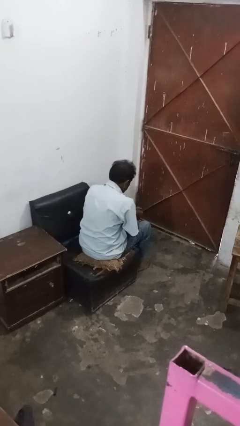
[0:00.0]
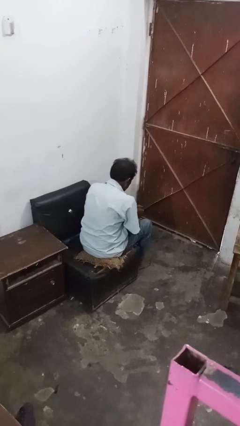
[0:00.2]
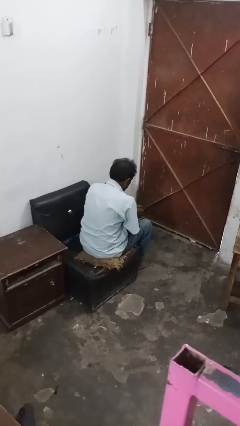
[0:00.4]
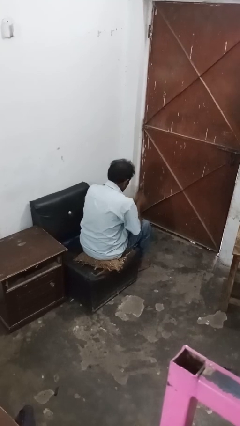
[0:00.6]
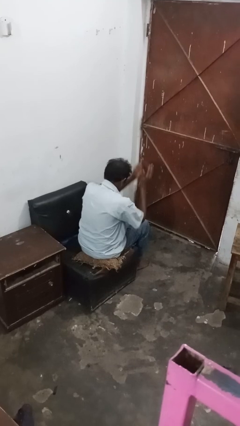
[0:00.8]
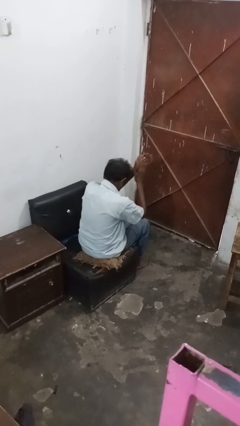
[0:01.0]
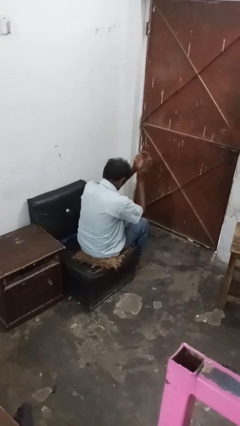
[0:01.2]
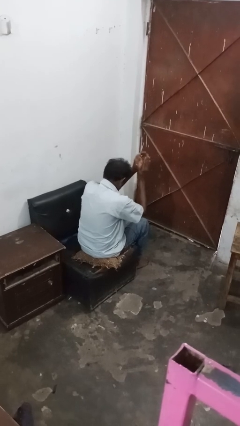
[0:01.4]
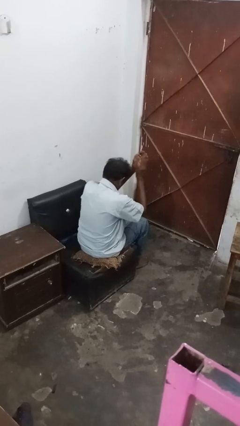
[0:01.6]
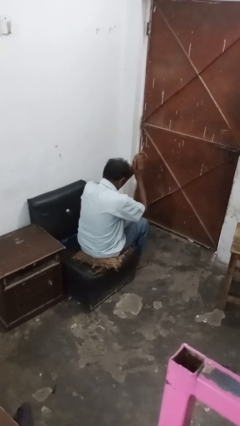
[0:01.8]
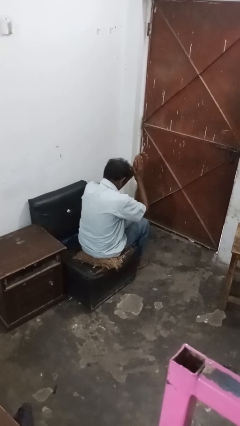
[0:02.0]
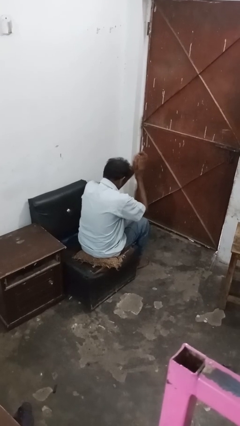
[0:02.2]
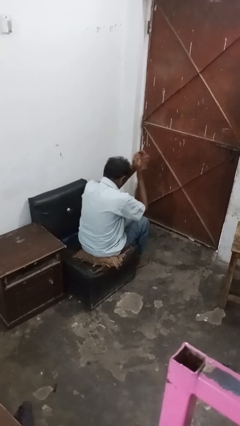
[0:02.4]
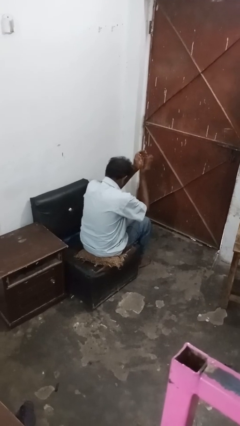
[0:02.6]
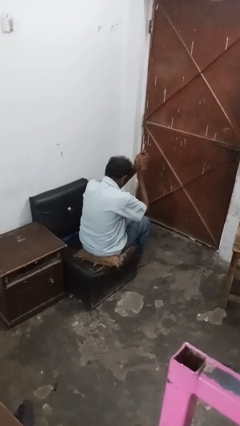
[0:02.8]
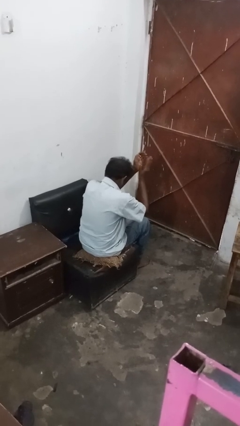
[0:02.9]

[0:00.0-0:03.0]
person claps hands

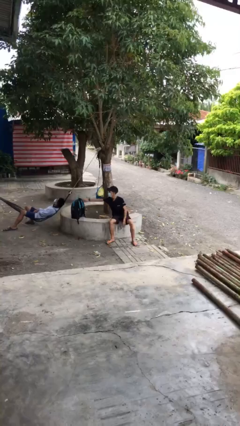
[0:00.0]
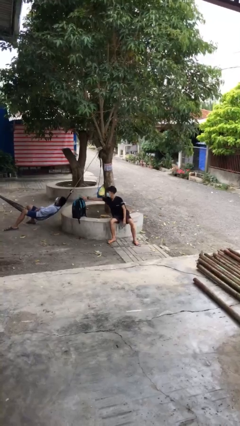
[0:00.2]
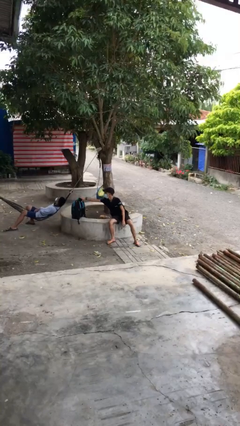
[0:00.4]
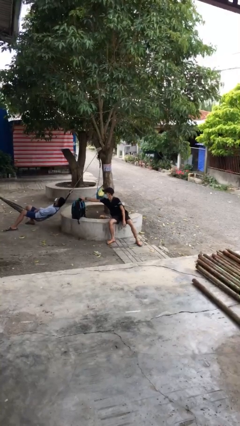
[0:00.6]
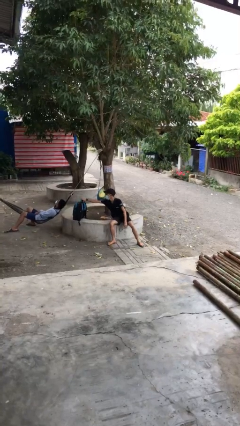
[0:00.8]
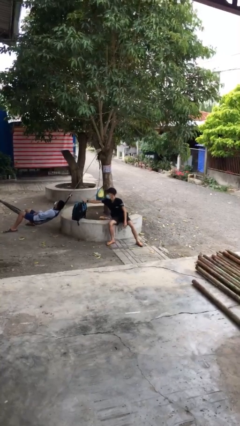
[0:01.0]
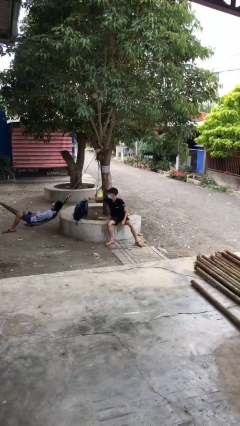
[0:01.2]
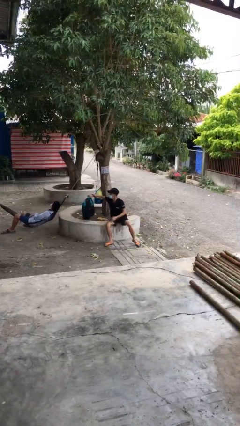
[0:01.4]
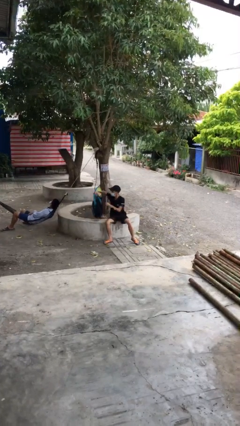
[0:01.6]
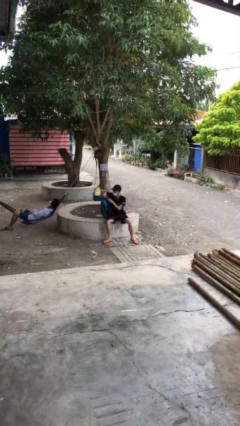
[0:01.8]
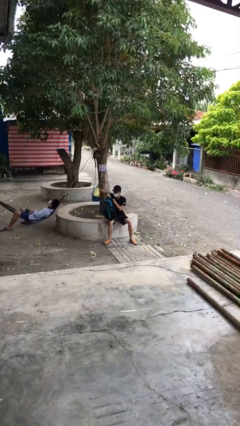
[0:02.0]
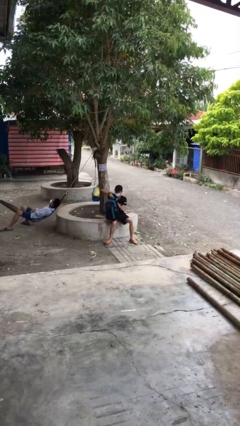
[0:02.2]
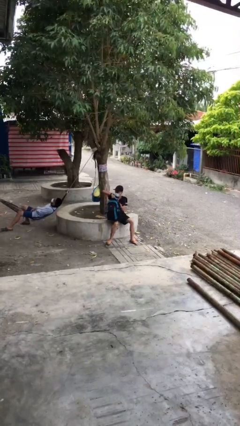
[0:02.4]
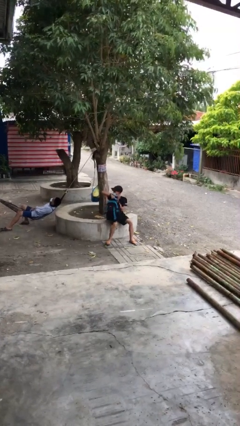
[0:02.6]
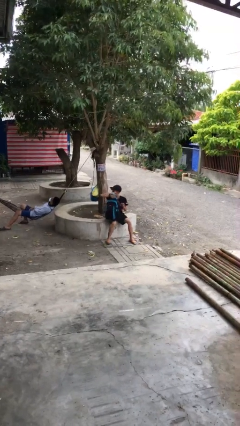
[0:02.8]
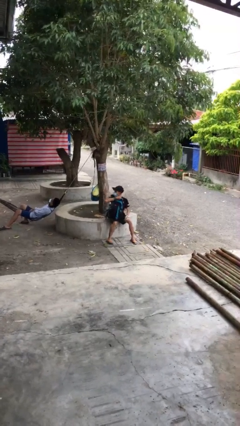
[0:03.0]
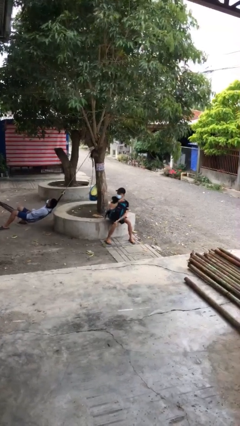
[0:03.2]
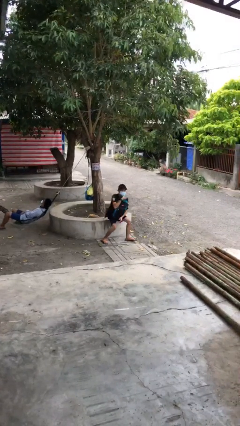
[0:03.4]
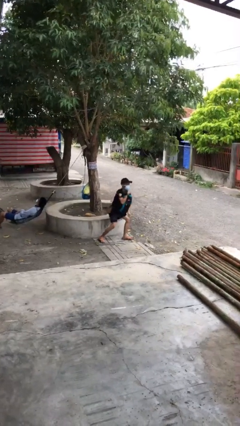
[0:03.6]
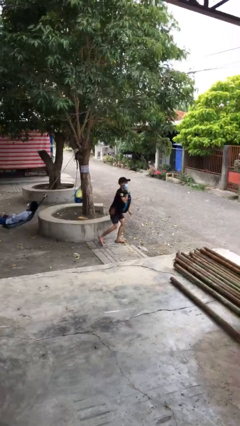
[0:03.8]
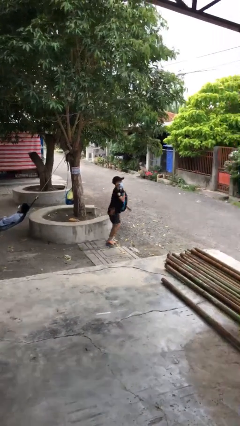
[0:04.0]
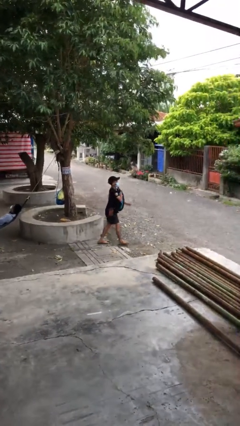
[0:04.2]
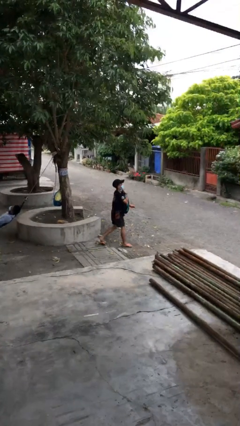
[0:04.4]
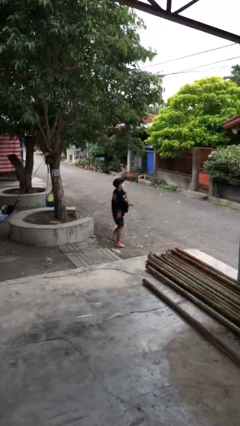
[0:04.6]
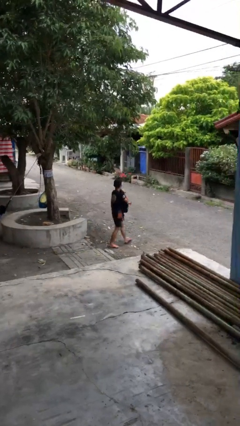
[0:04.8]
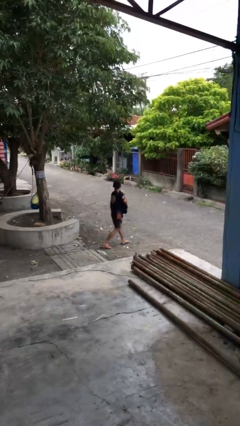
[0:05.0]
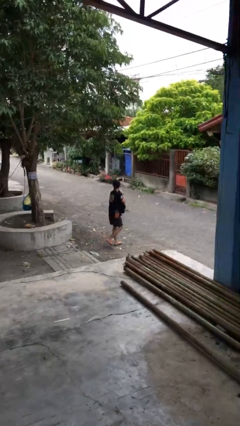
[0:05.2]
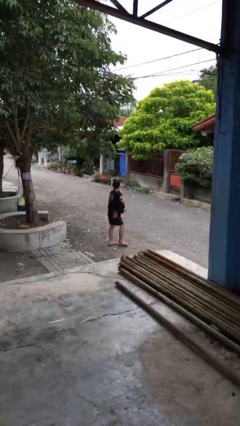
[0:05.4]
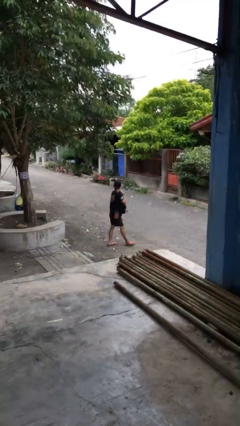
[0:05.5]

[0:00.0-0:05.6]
person steals object from person

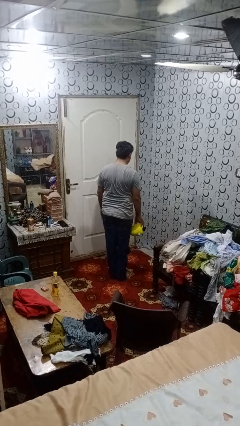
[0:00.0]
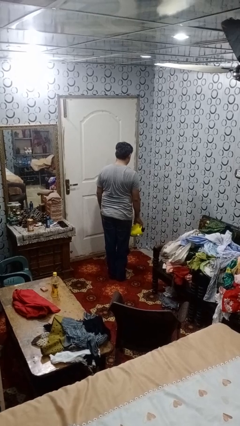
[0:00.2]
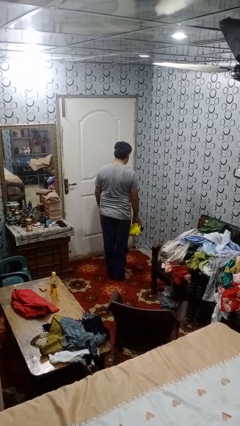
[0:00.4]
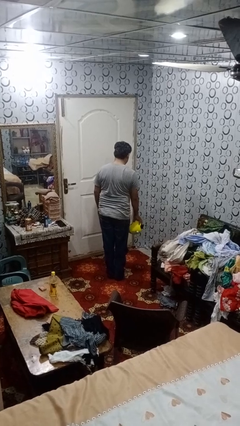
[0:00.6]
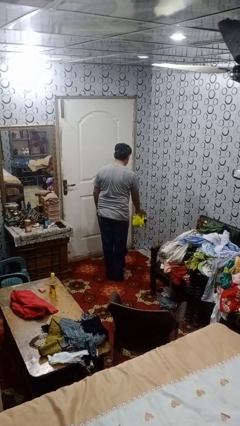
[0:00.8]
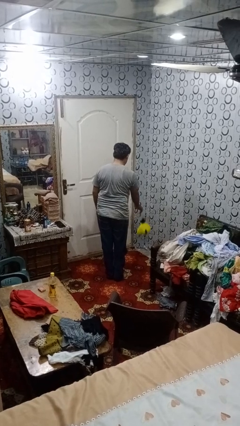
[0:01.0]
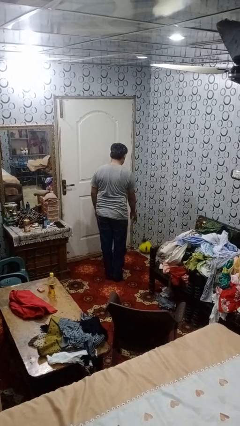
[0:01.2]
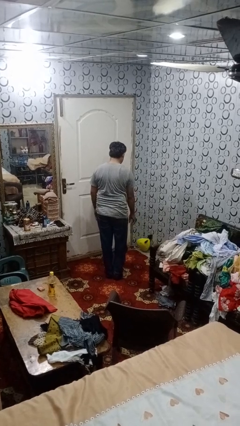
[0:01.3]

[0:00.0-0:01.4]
person throws object to ground

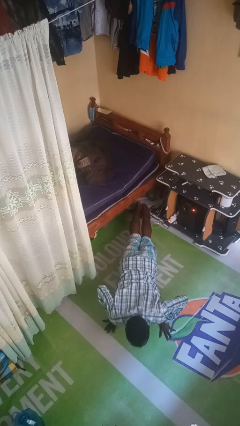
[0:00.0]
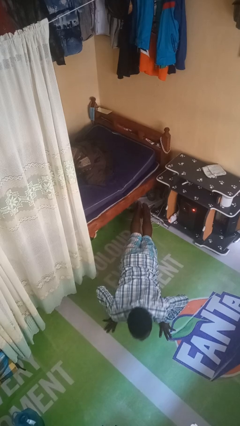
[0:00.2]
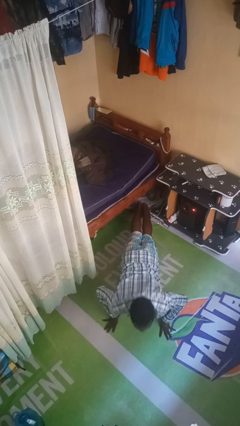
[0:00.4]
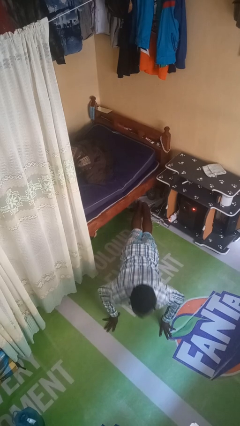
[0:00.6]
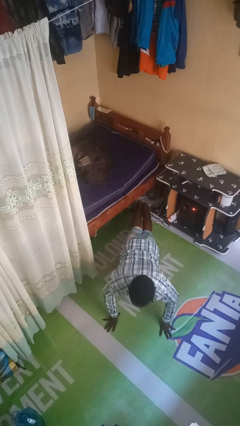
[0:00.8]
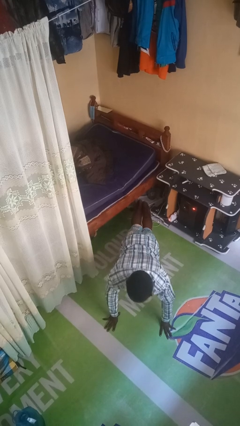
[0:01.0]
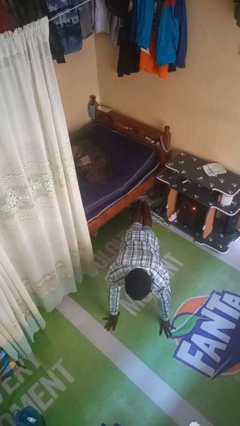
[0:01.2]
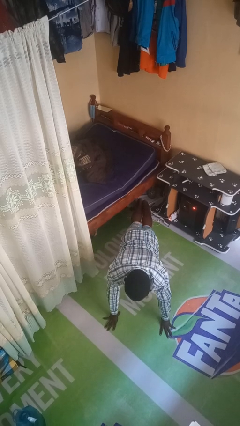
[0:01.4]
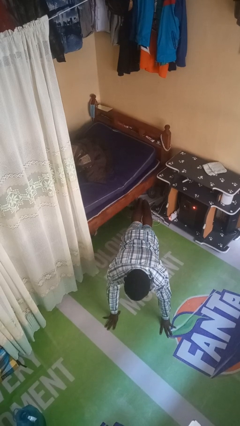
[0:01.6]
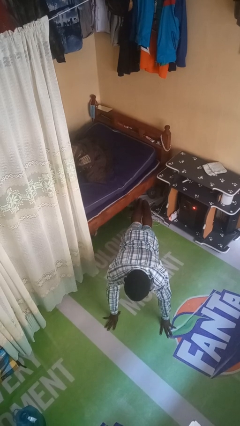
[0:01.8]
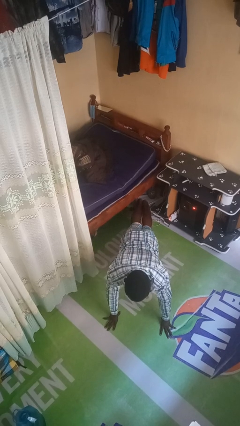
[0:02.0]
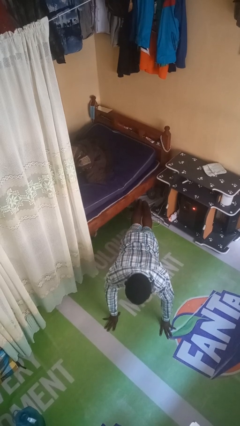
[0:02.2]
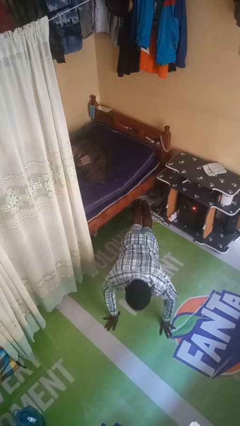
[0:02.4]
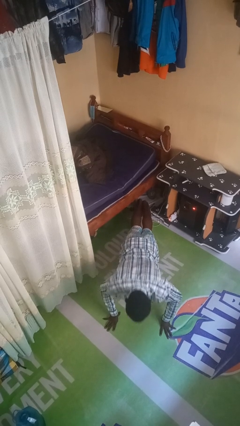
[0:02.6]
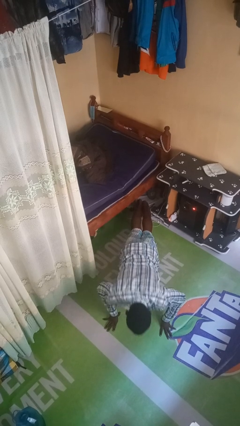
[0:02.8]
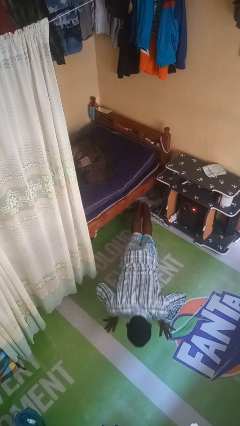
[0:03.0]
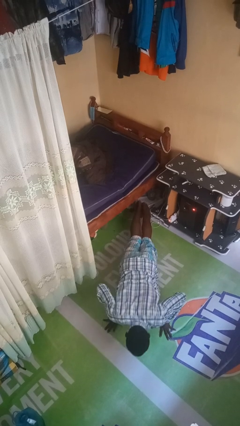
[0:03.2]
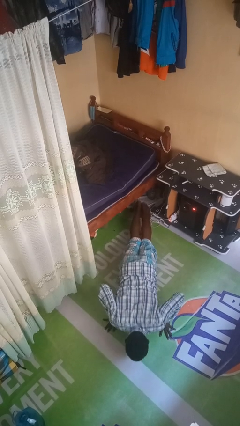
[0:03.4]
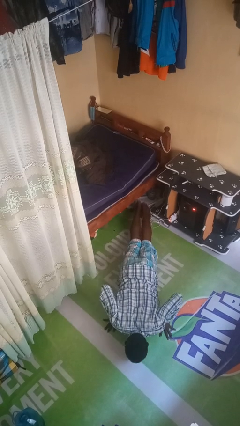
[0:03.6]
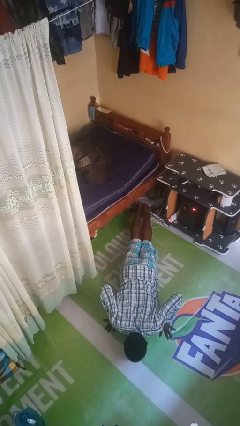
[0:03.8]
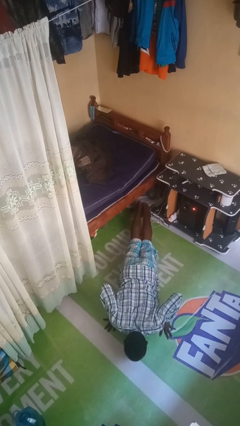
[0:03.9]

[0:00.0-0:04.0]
person exercises with pushup

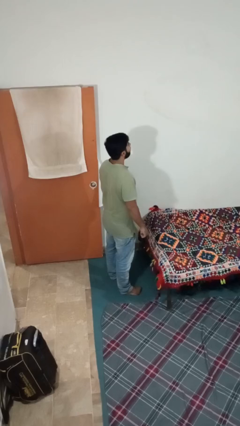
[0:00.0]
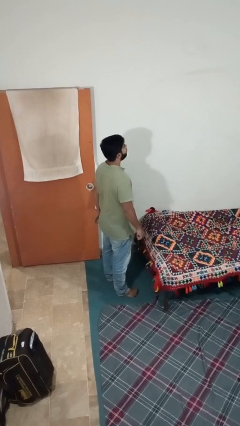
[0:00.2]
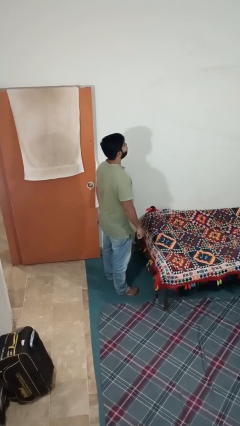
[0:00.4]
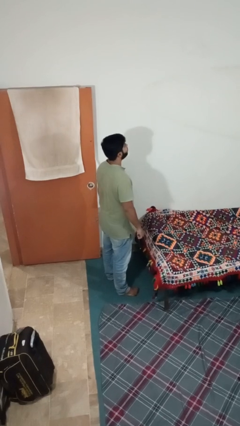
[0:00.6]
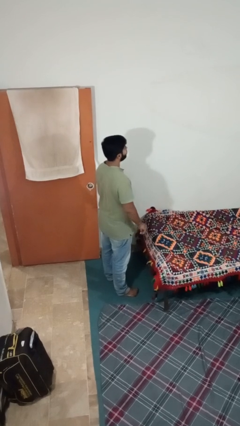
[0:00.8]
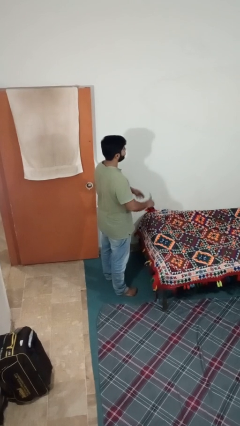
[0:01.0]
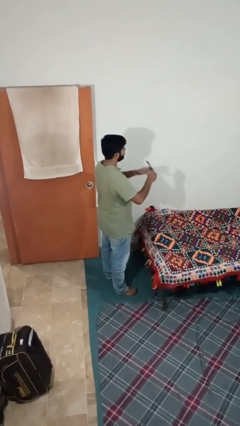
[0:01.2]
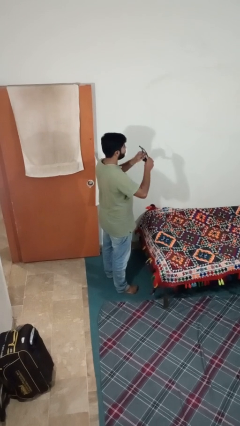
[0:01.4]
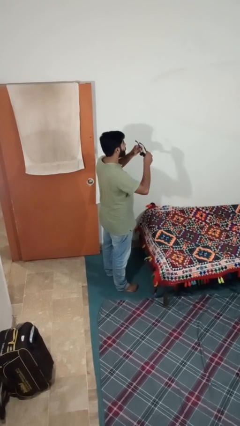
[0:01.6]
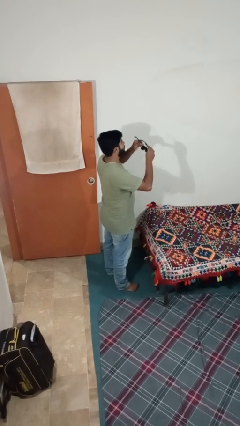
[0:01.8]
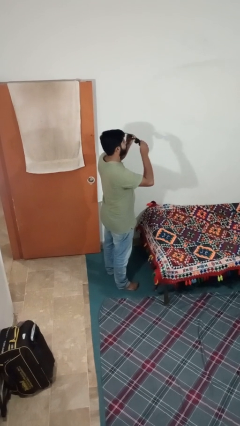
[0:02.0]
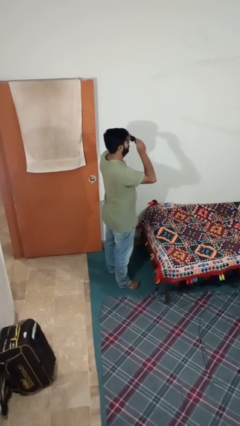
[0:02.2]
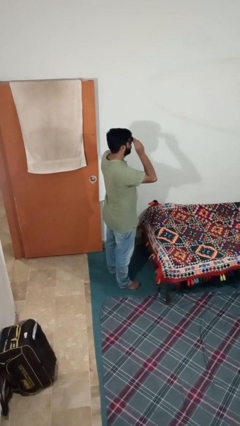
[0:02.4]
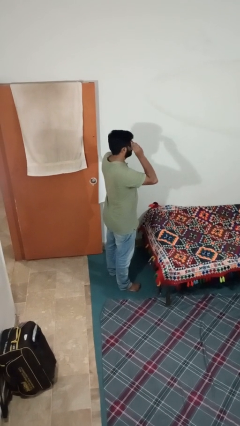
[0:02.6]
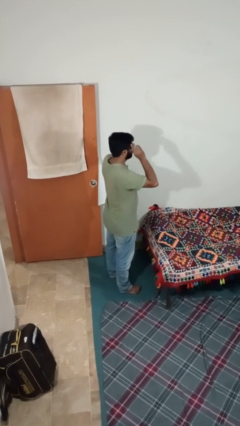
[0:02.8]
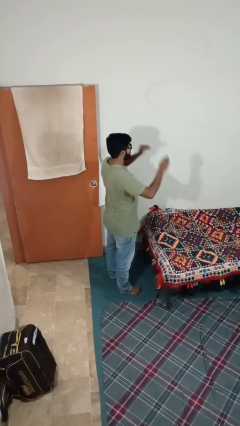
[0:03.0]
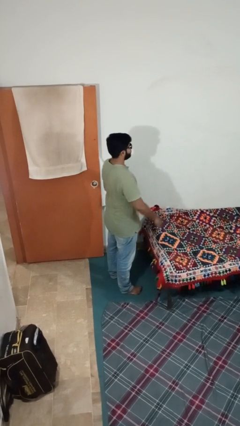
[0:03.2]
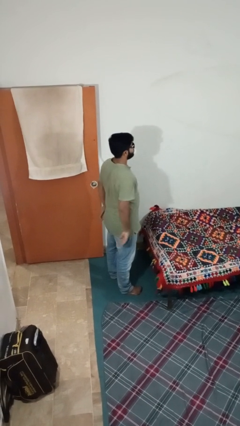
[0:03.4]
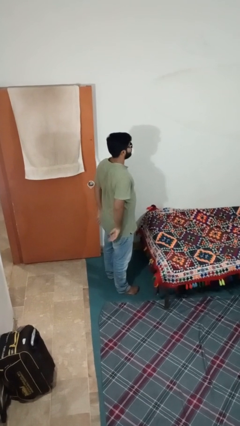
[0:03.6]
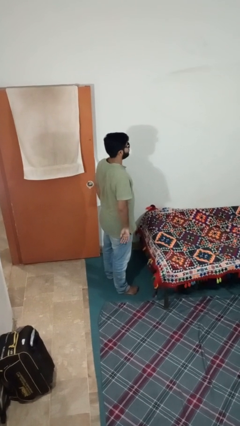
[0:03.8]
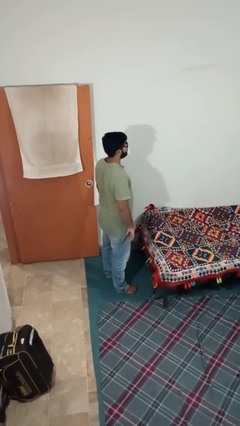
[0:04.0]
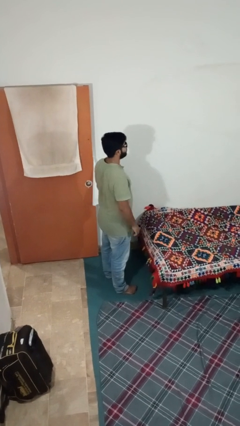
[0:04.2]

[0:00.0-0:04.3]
person puts on sunglasses
